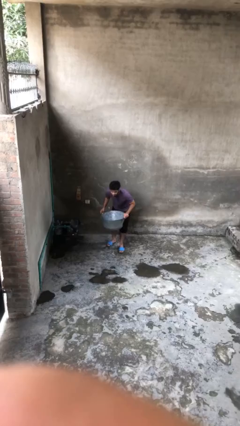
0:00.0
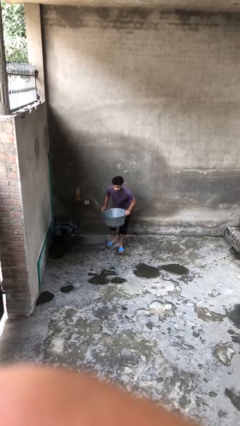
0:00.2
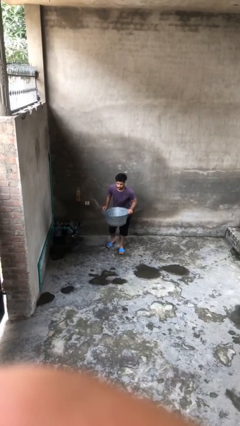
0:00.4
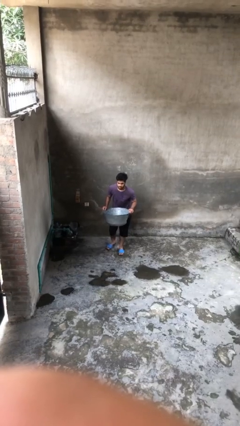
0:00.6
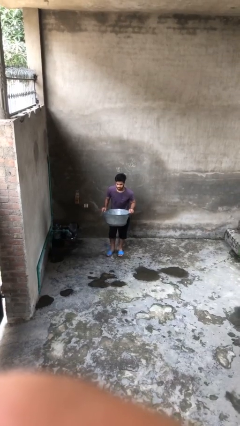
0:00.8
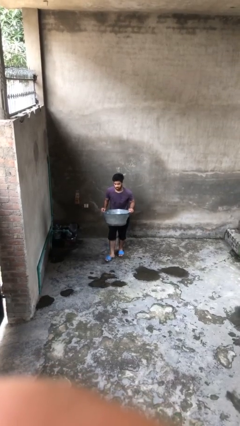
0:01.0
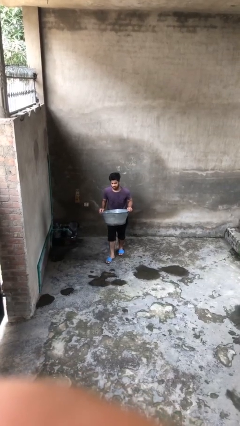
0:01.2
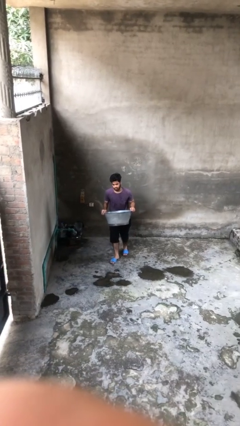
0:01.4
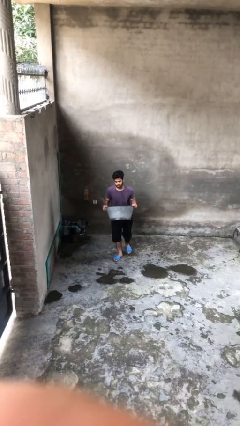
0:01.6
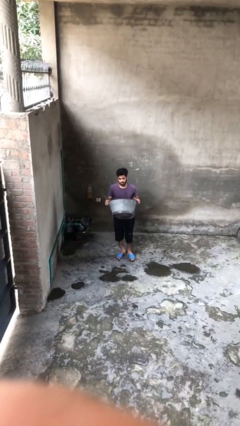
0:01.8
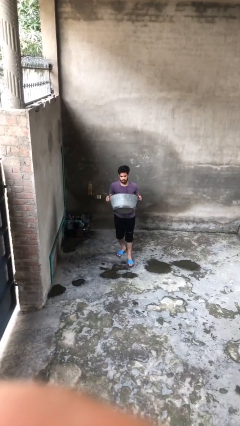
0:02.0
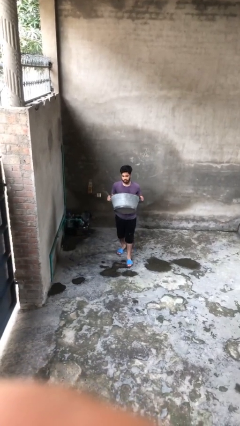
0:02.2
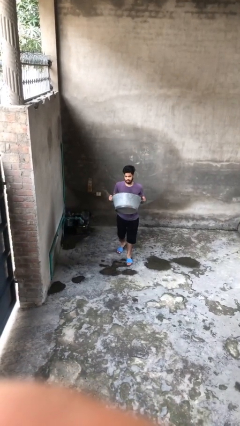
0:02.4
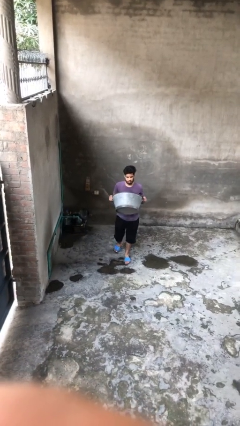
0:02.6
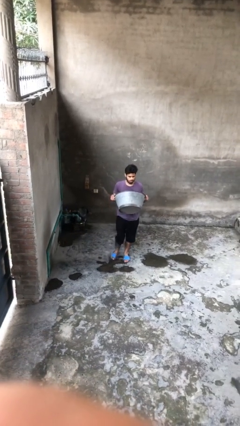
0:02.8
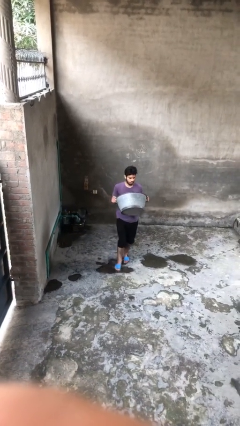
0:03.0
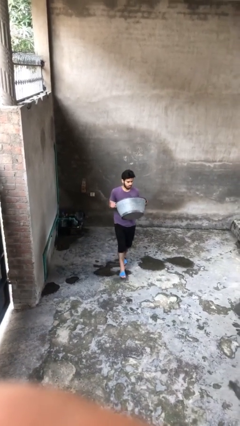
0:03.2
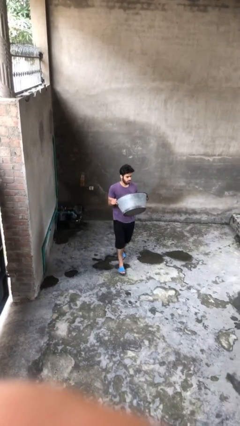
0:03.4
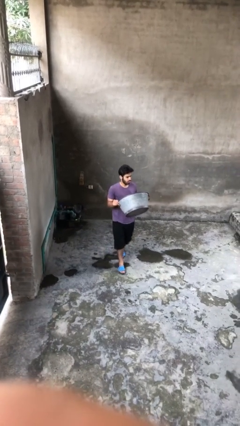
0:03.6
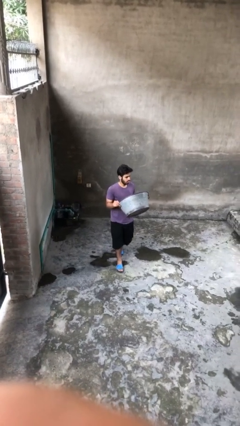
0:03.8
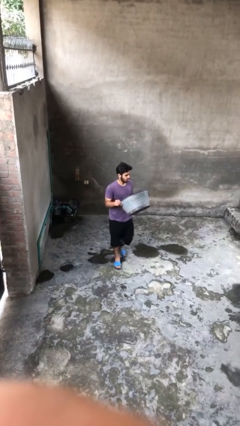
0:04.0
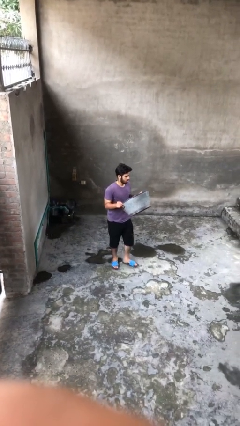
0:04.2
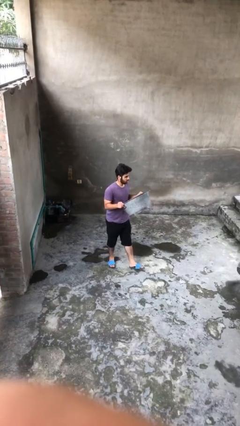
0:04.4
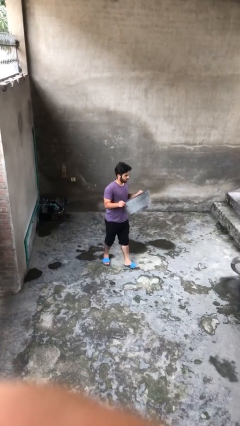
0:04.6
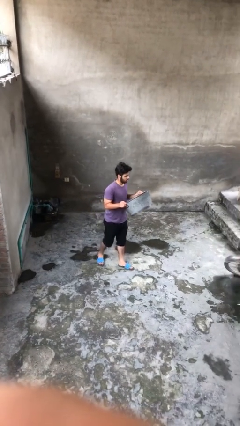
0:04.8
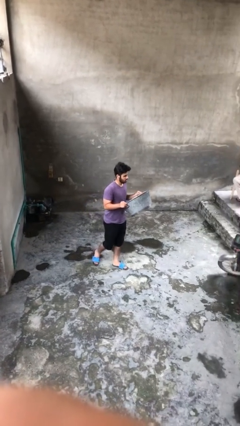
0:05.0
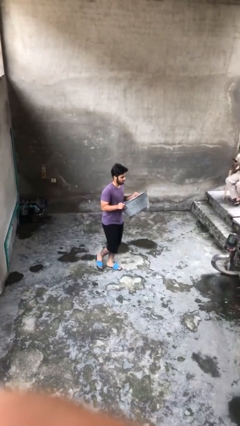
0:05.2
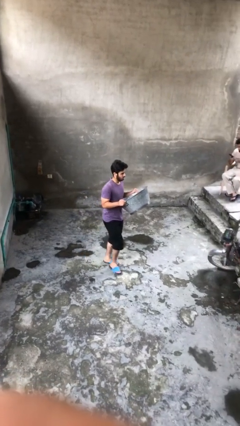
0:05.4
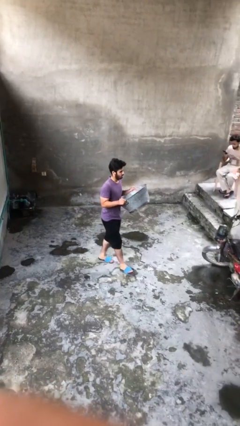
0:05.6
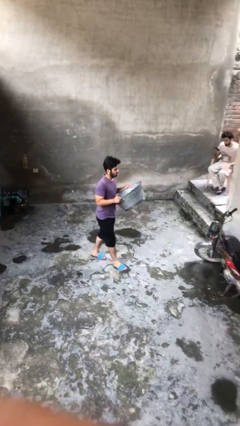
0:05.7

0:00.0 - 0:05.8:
person carries heavy object

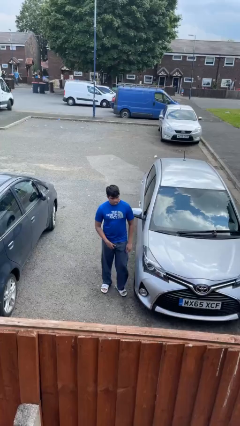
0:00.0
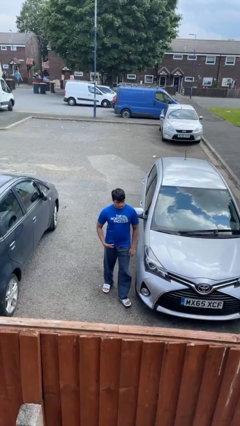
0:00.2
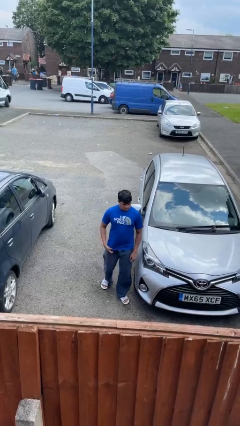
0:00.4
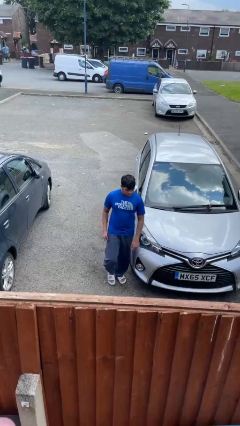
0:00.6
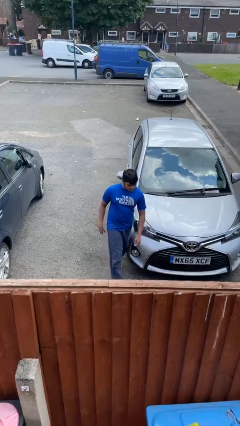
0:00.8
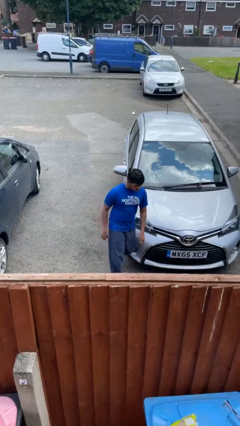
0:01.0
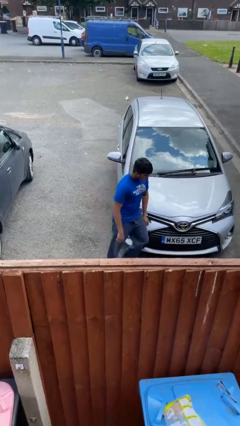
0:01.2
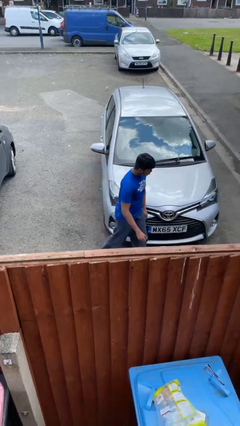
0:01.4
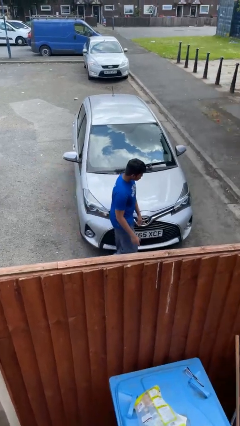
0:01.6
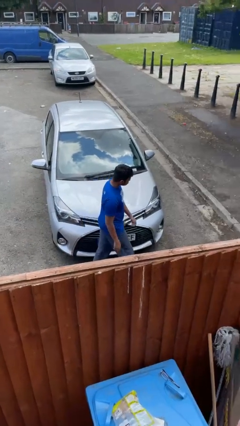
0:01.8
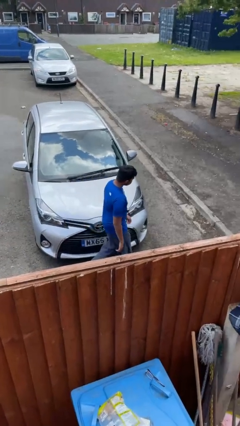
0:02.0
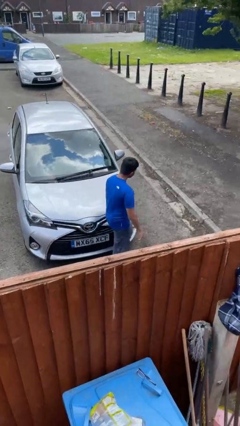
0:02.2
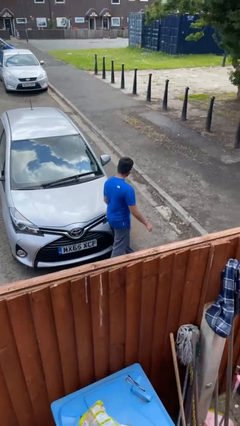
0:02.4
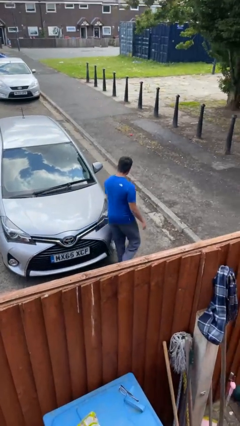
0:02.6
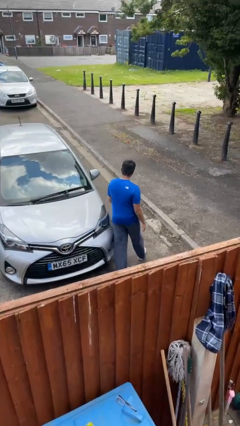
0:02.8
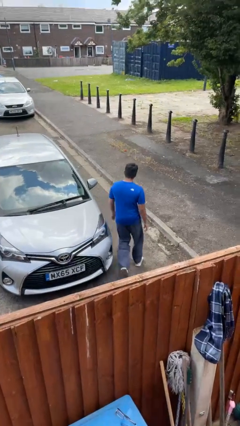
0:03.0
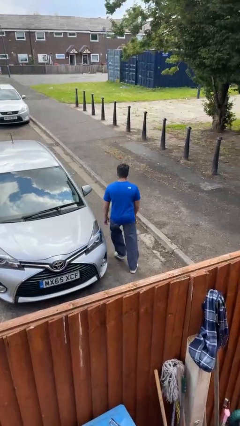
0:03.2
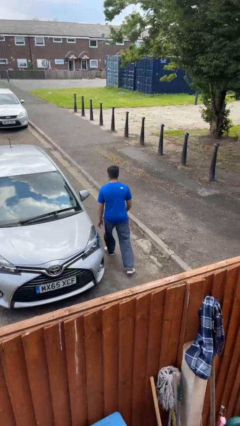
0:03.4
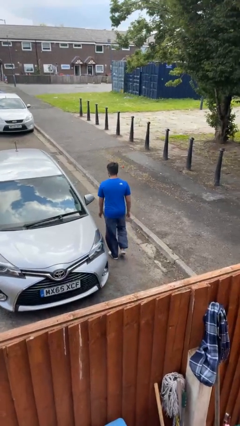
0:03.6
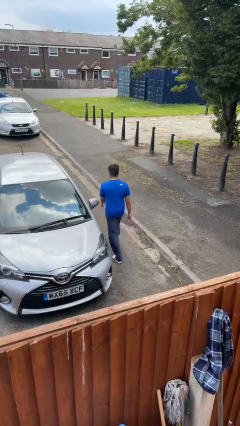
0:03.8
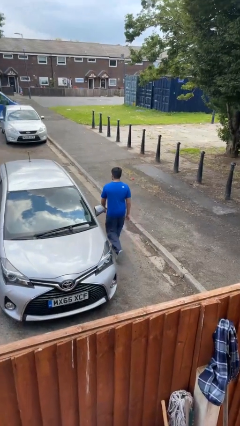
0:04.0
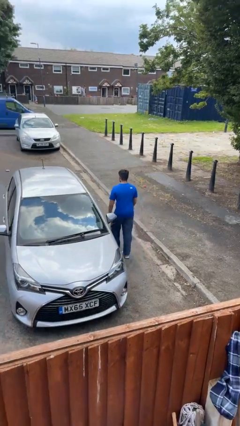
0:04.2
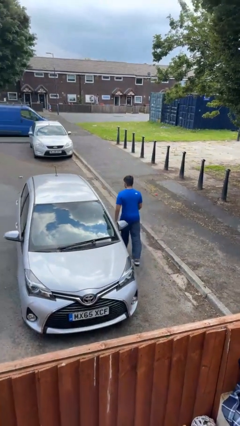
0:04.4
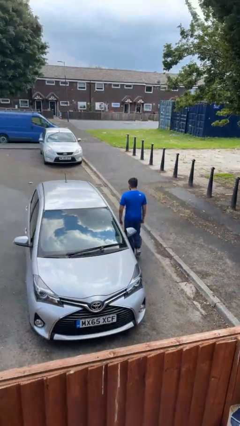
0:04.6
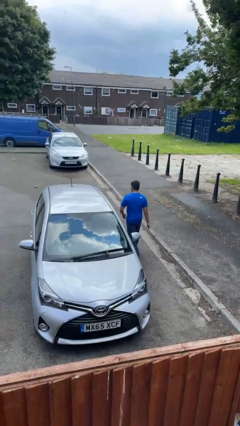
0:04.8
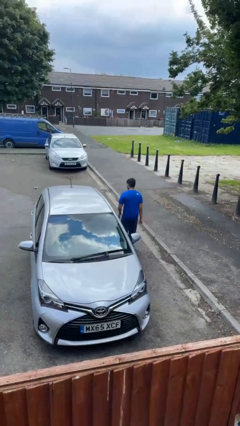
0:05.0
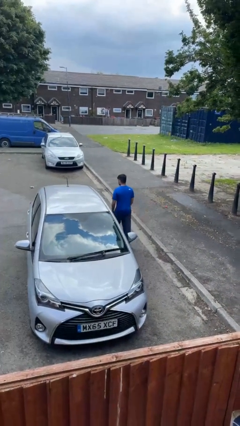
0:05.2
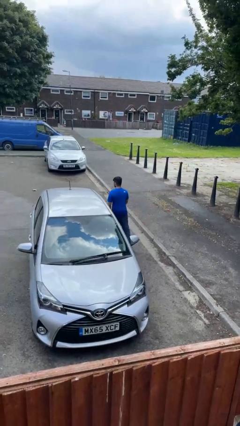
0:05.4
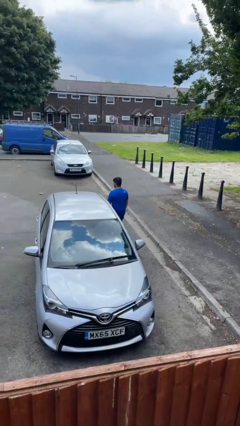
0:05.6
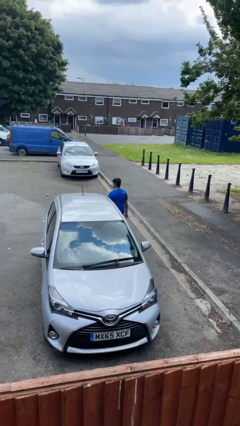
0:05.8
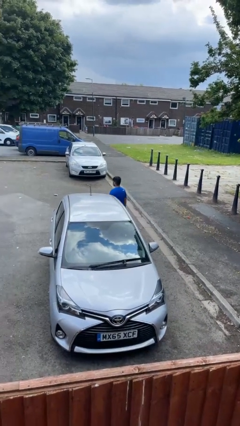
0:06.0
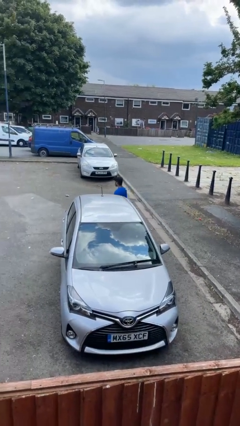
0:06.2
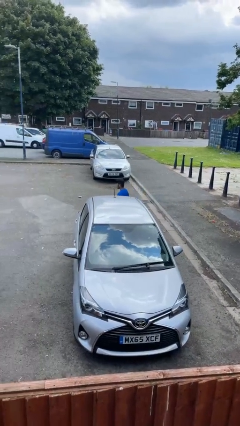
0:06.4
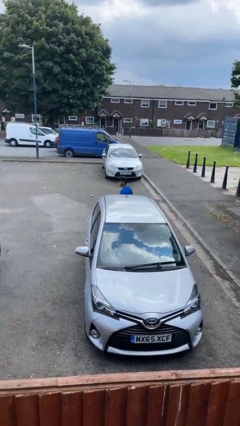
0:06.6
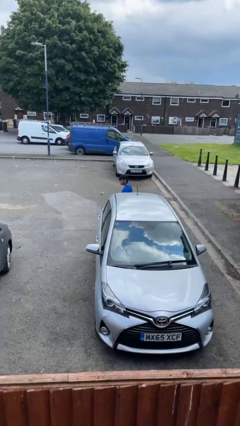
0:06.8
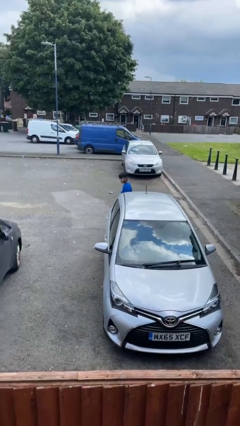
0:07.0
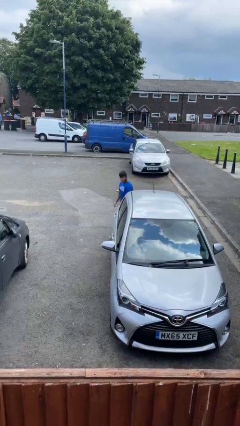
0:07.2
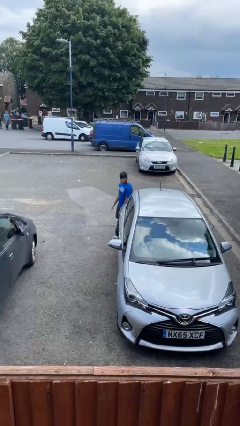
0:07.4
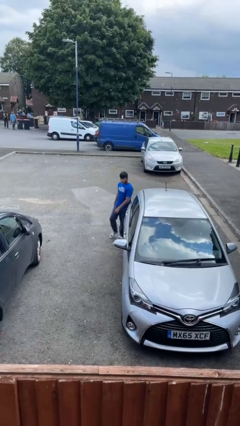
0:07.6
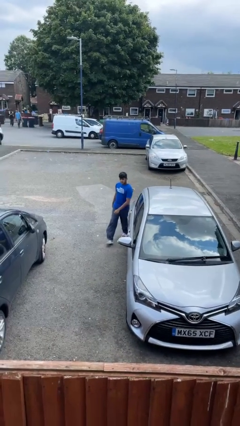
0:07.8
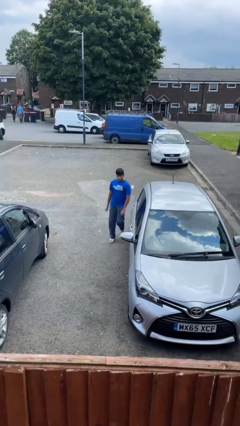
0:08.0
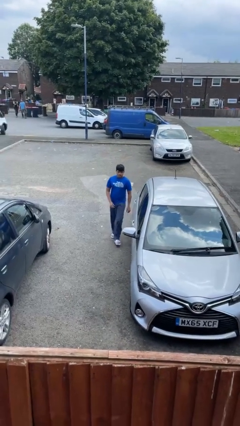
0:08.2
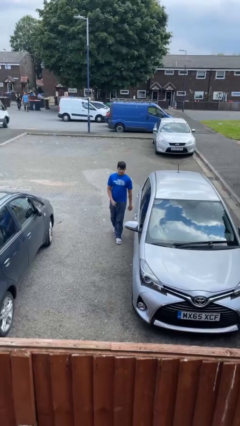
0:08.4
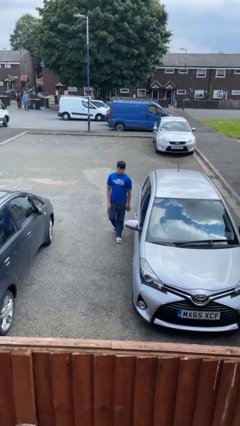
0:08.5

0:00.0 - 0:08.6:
person walks around car

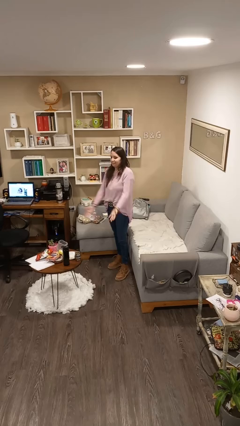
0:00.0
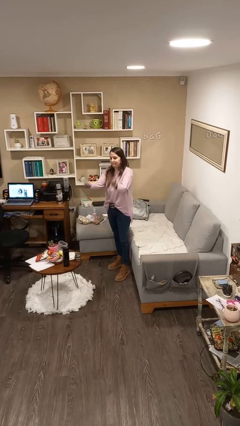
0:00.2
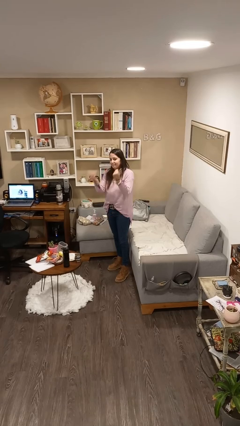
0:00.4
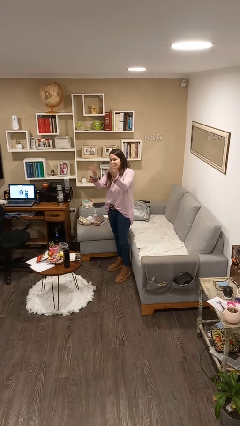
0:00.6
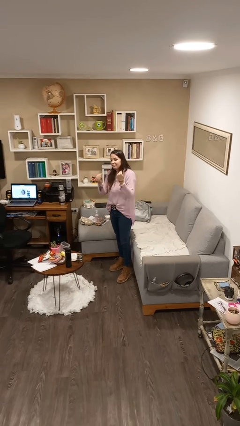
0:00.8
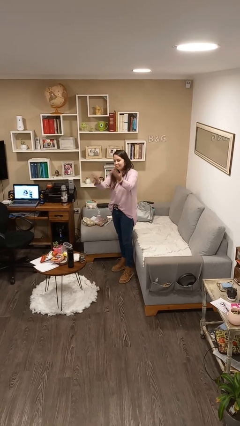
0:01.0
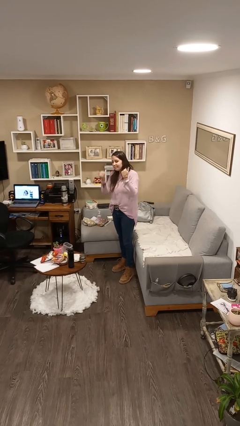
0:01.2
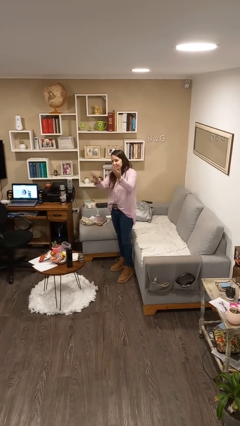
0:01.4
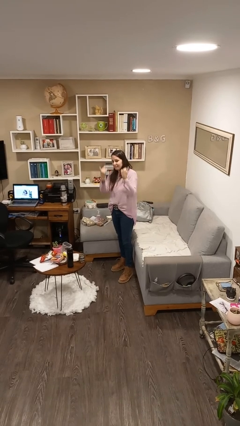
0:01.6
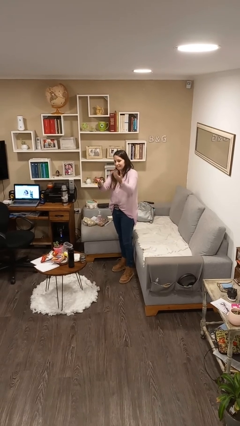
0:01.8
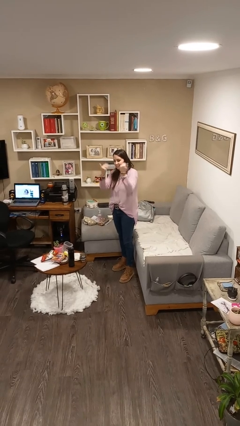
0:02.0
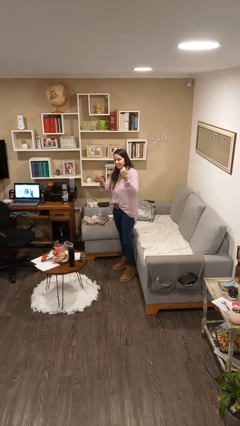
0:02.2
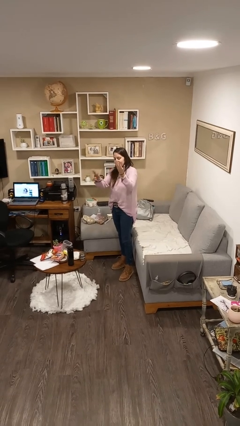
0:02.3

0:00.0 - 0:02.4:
person gestures come here

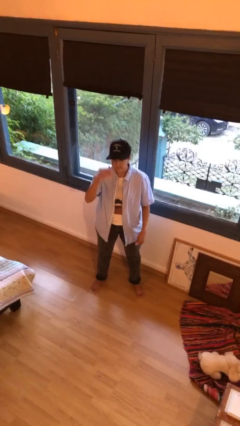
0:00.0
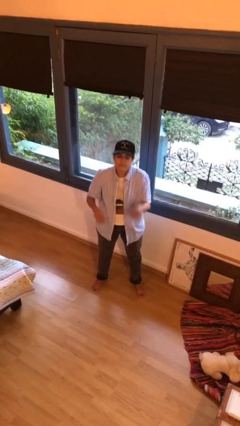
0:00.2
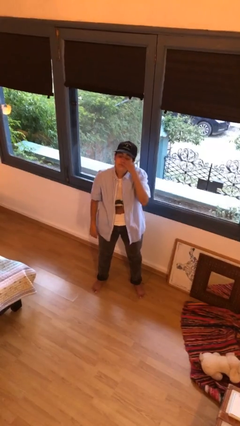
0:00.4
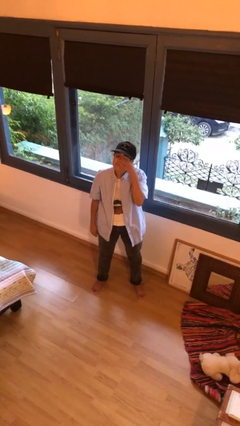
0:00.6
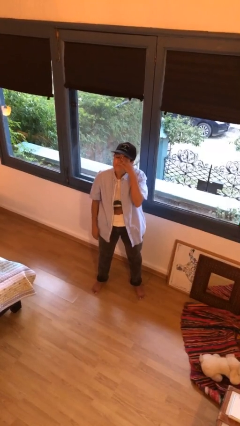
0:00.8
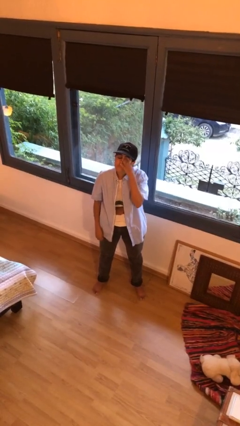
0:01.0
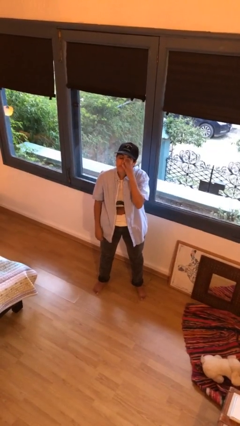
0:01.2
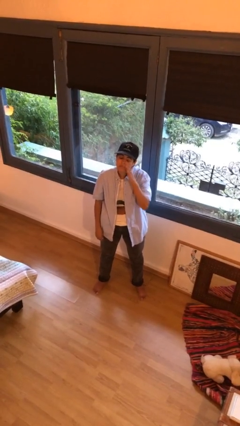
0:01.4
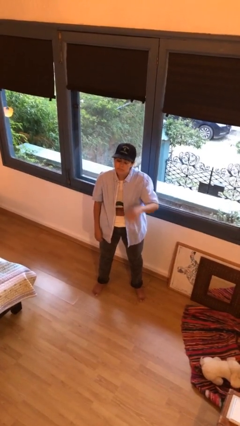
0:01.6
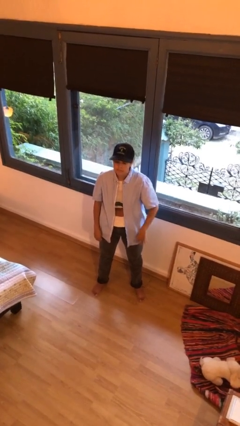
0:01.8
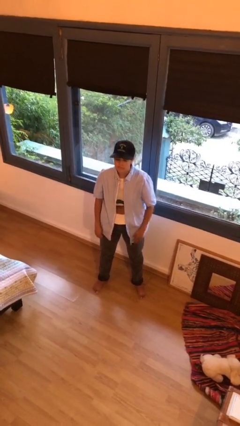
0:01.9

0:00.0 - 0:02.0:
person rubs eyes
